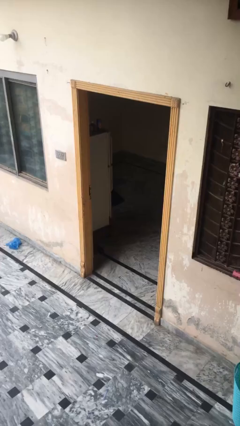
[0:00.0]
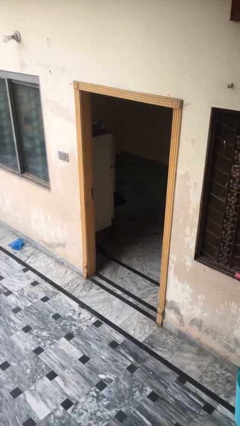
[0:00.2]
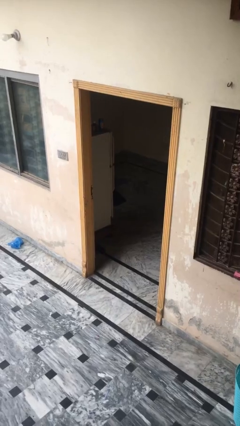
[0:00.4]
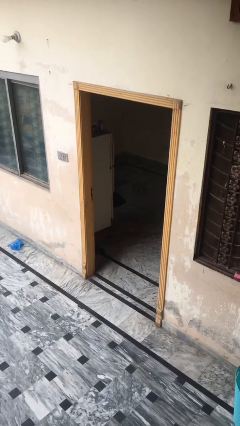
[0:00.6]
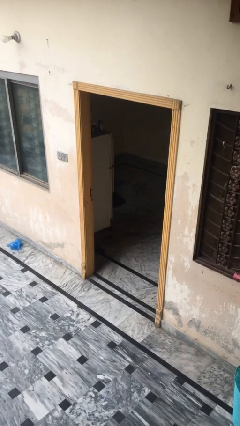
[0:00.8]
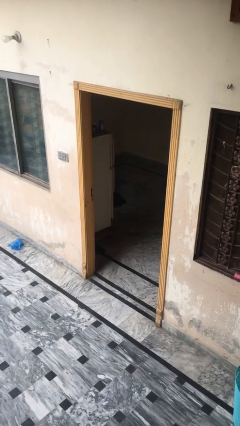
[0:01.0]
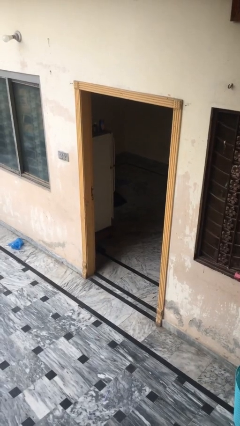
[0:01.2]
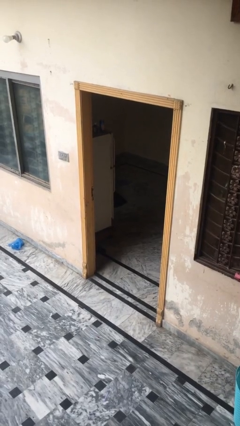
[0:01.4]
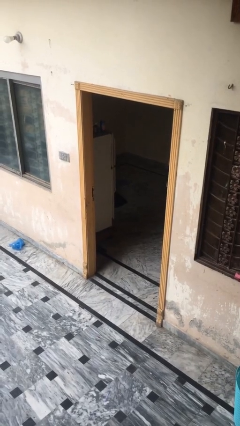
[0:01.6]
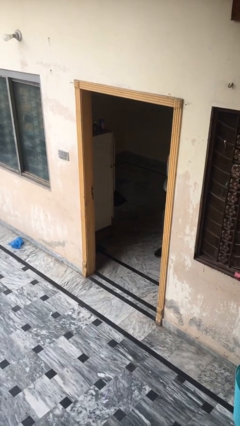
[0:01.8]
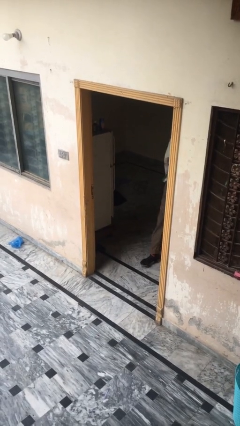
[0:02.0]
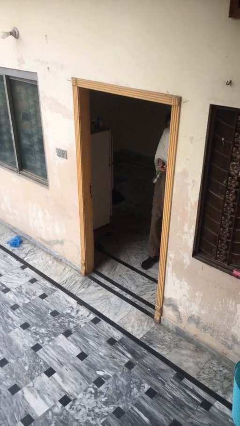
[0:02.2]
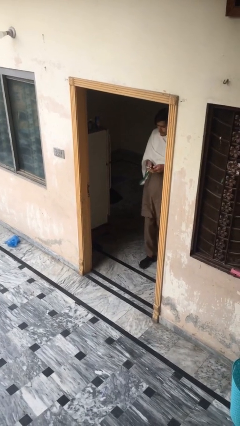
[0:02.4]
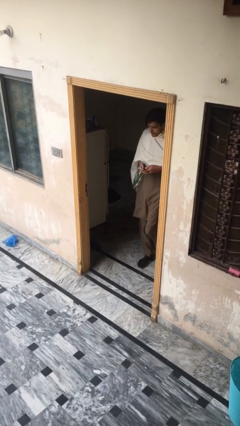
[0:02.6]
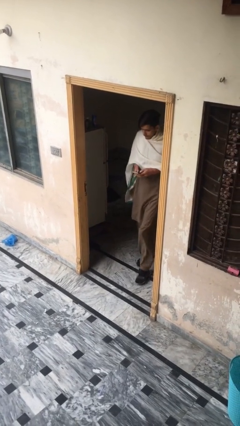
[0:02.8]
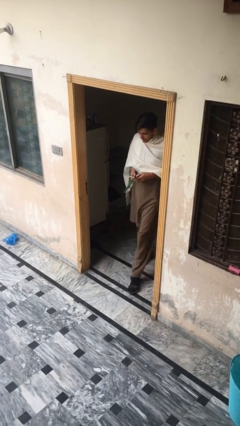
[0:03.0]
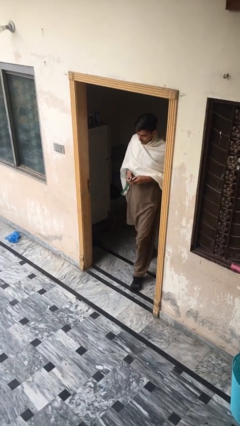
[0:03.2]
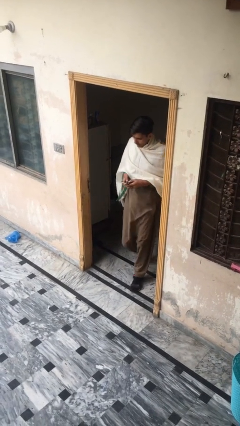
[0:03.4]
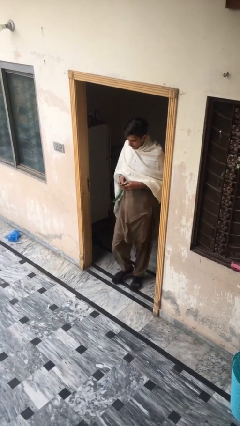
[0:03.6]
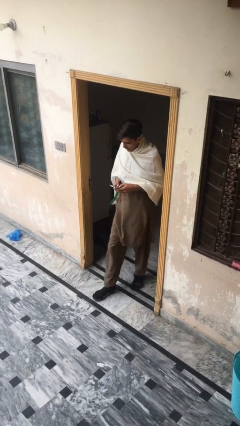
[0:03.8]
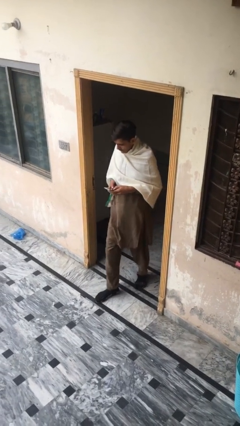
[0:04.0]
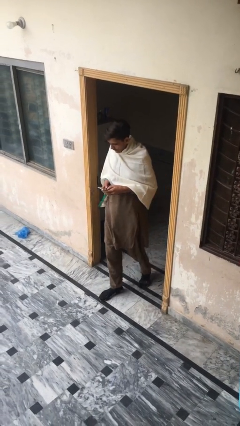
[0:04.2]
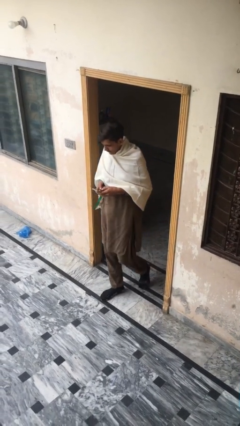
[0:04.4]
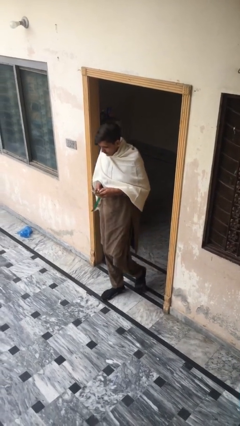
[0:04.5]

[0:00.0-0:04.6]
person enters scene through structure

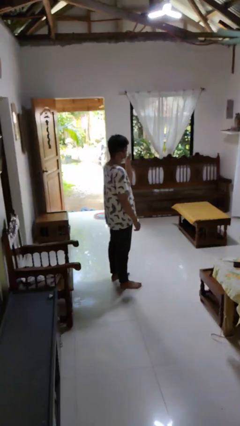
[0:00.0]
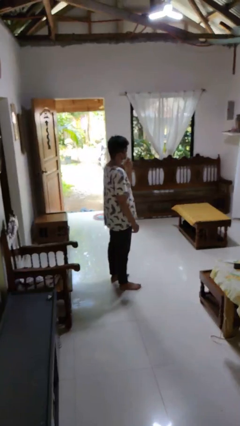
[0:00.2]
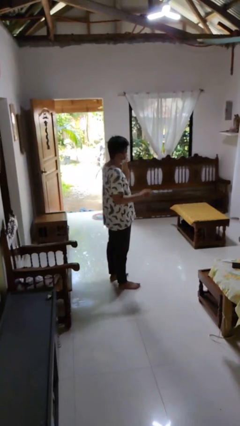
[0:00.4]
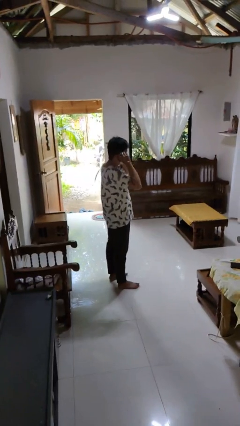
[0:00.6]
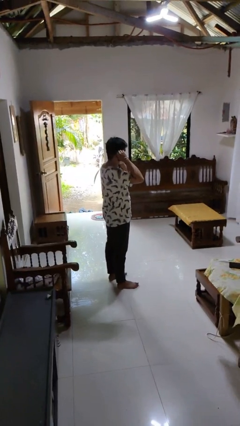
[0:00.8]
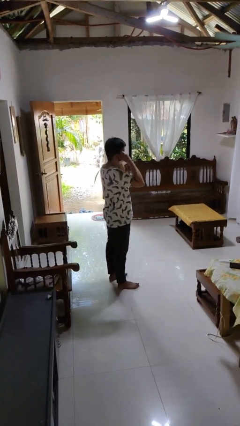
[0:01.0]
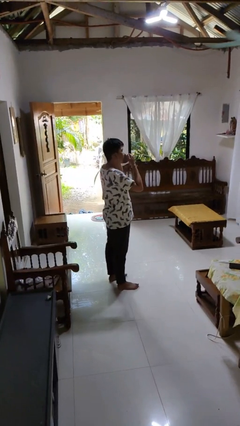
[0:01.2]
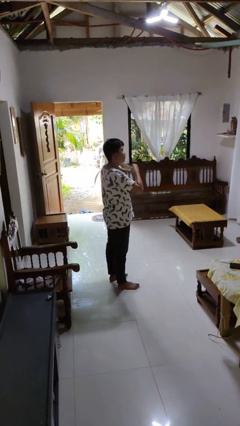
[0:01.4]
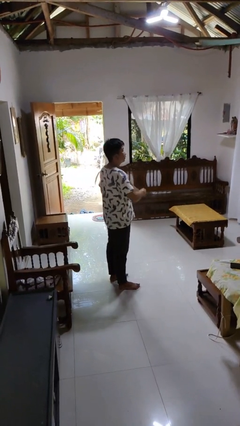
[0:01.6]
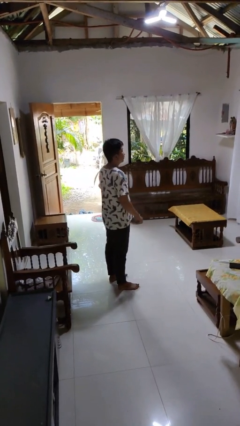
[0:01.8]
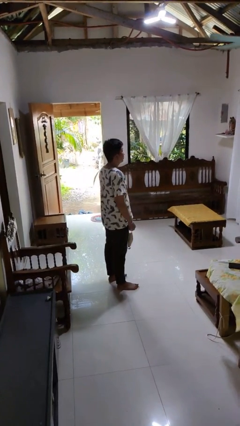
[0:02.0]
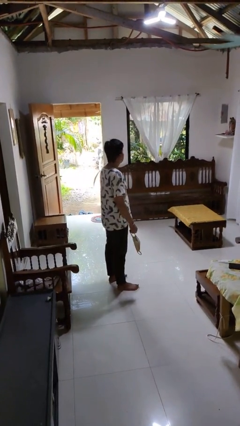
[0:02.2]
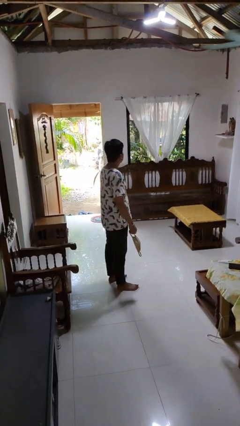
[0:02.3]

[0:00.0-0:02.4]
person takes off facemask

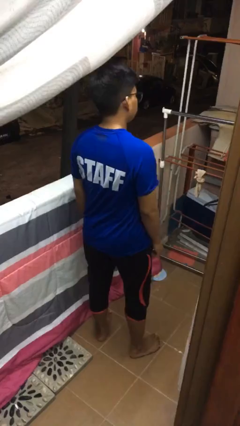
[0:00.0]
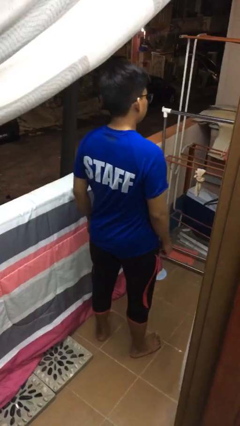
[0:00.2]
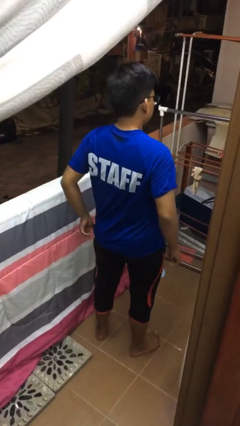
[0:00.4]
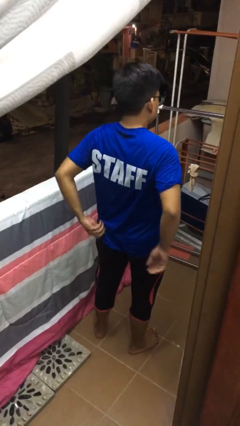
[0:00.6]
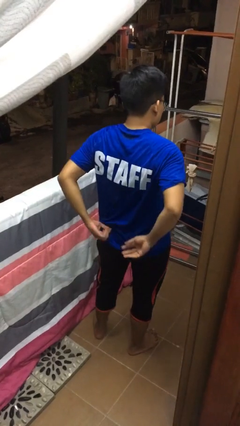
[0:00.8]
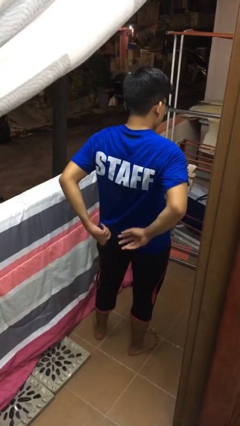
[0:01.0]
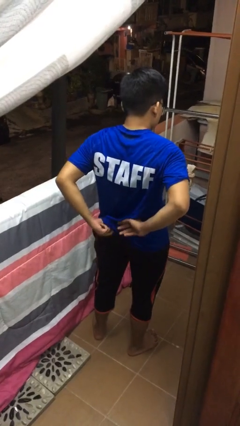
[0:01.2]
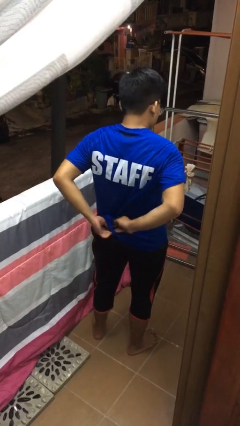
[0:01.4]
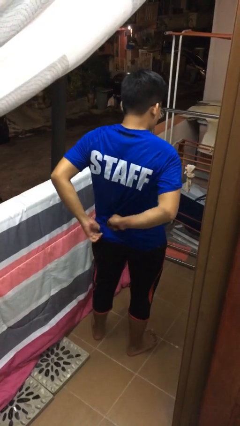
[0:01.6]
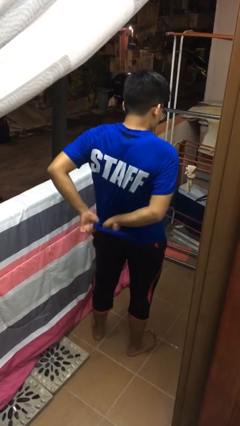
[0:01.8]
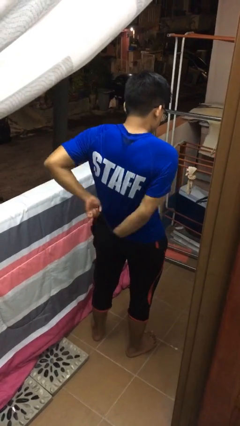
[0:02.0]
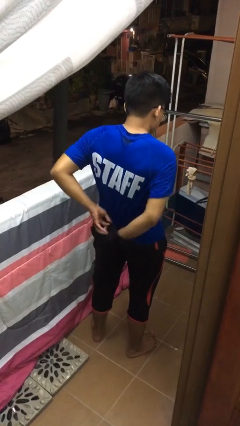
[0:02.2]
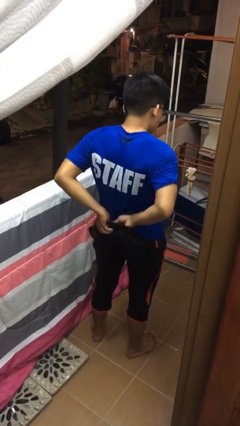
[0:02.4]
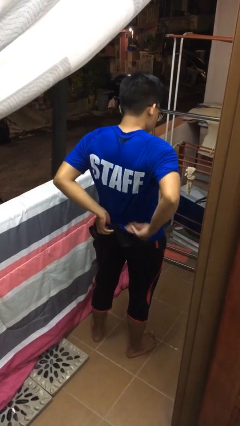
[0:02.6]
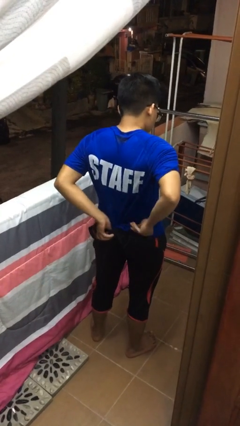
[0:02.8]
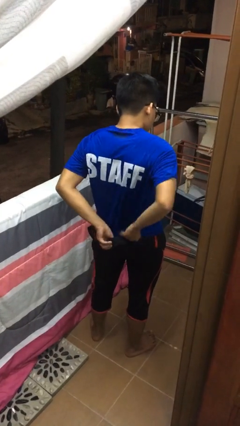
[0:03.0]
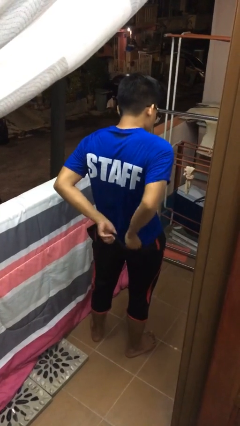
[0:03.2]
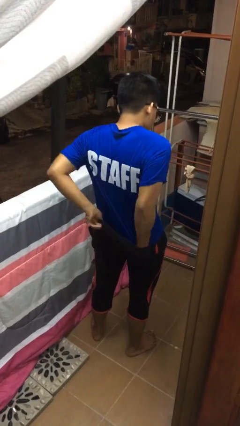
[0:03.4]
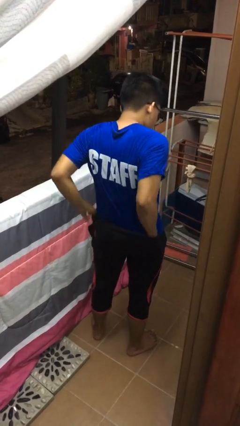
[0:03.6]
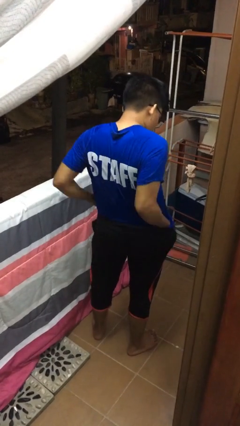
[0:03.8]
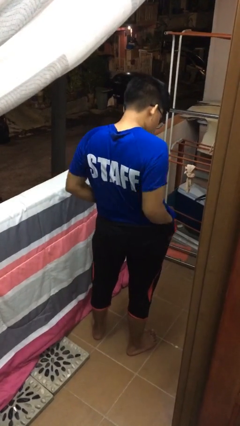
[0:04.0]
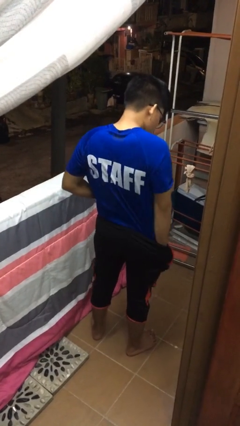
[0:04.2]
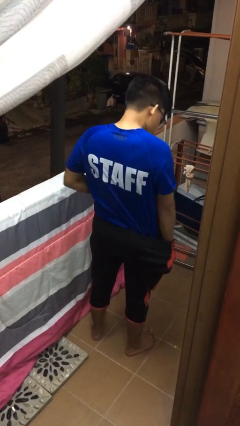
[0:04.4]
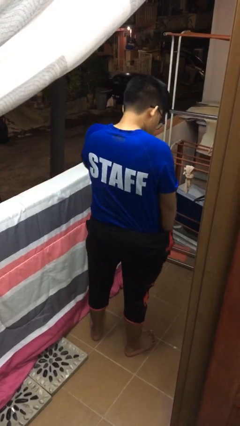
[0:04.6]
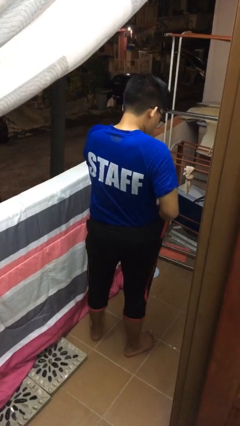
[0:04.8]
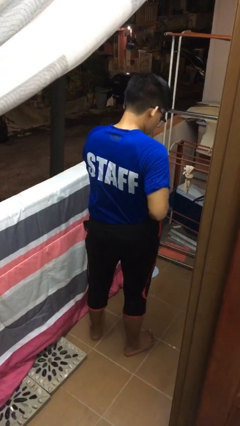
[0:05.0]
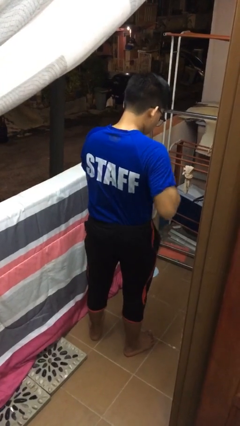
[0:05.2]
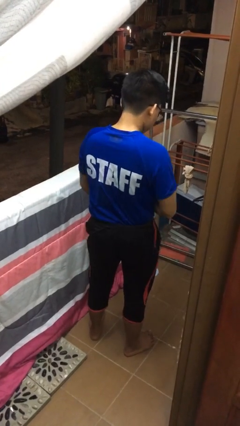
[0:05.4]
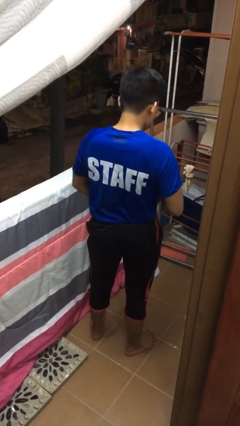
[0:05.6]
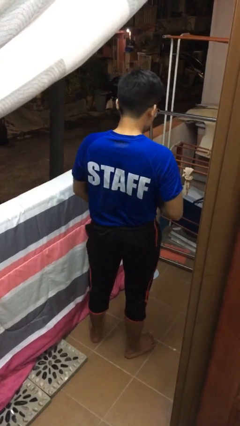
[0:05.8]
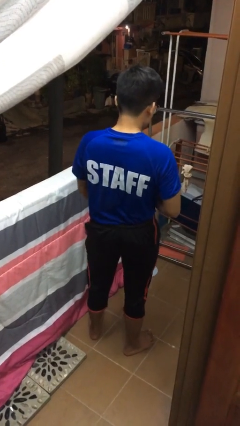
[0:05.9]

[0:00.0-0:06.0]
person tucks in shirt

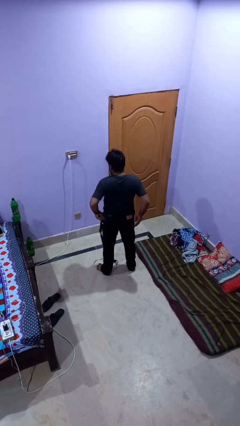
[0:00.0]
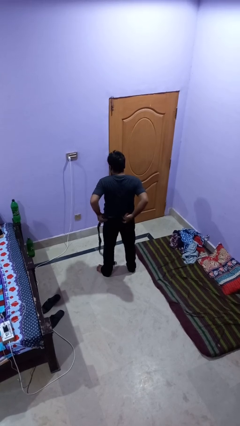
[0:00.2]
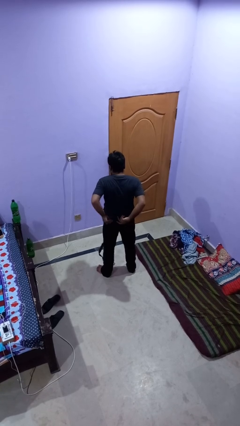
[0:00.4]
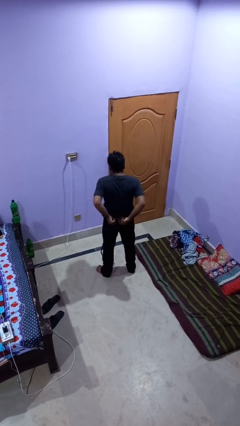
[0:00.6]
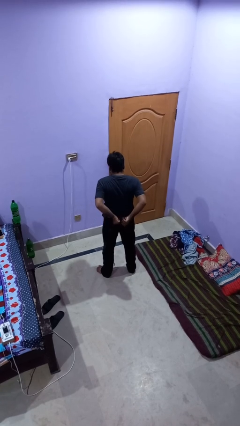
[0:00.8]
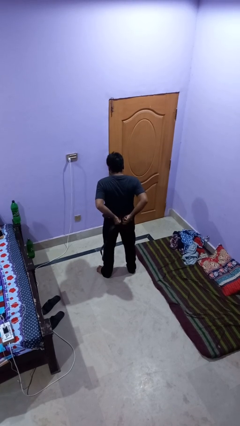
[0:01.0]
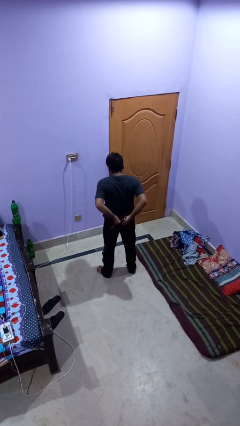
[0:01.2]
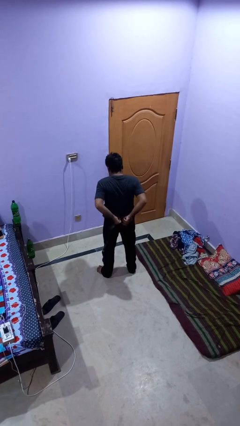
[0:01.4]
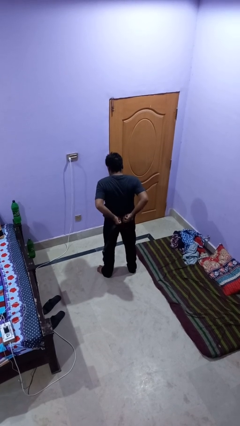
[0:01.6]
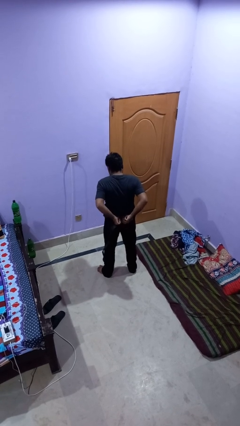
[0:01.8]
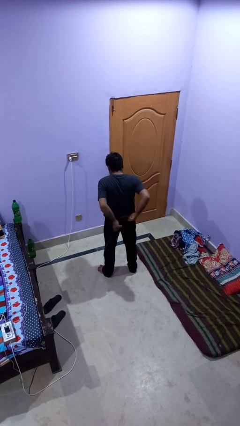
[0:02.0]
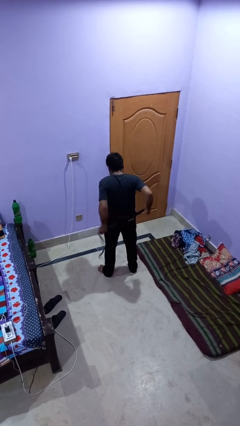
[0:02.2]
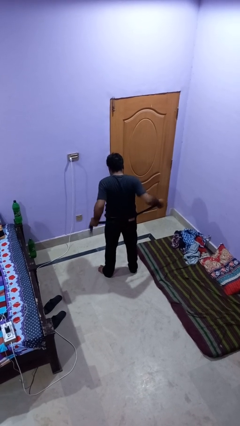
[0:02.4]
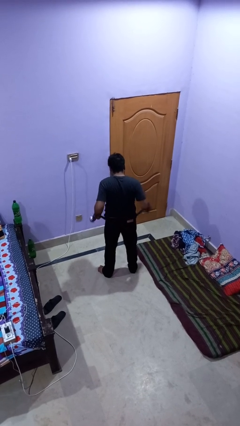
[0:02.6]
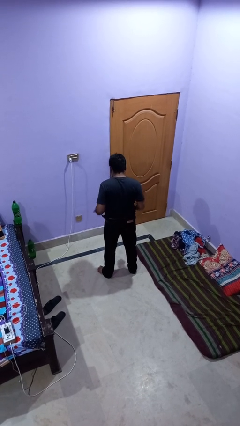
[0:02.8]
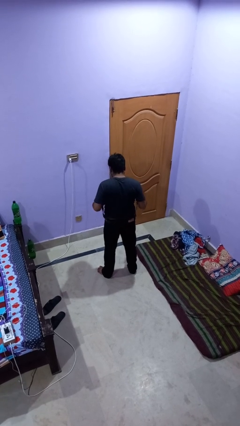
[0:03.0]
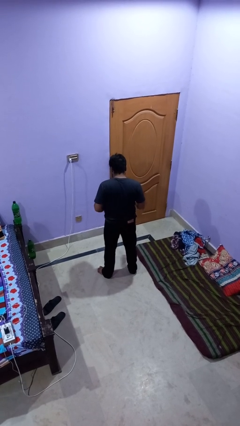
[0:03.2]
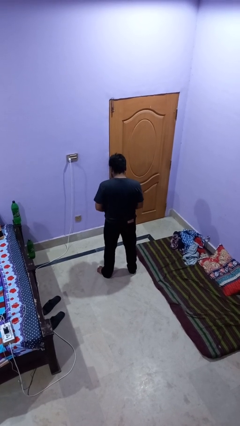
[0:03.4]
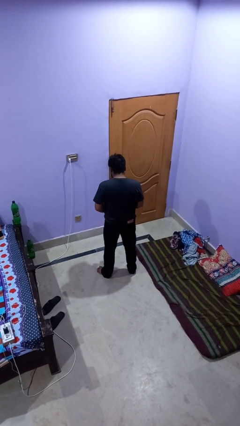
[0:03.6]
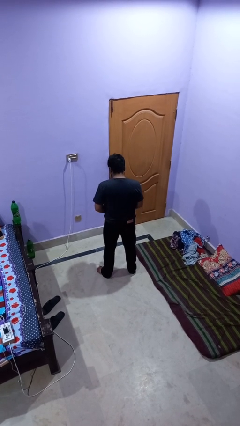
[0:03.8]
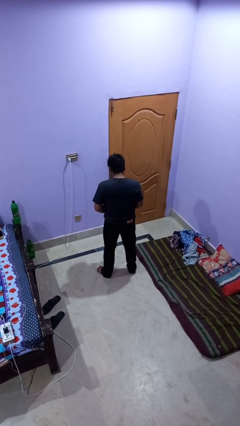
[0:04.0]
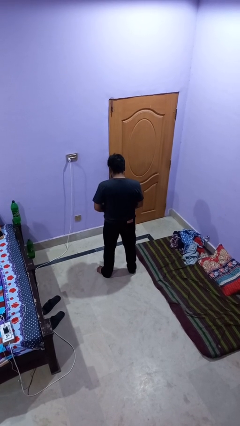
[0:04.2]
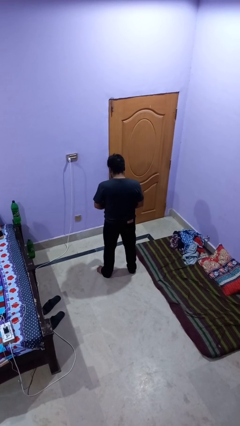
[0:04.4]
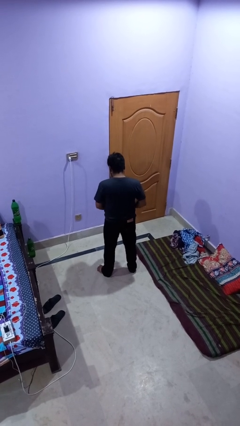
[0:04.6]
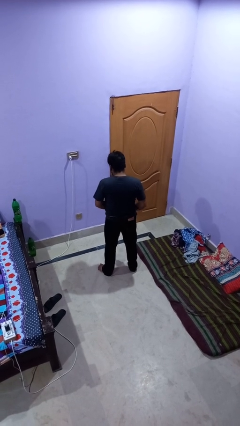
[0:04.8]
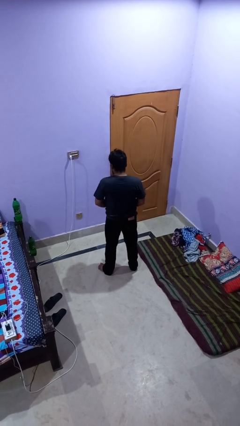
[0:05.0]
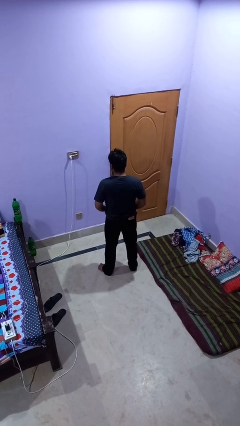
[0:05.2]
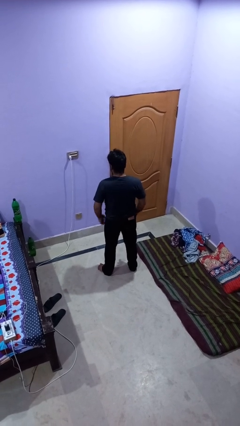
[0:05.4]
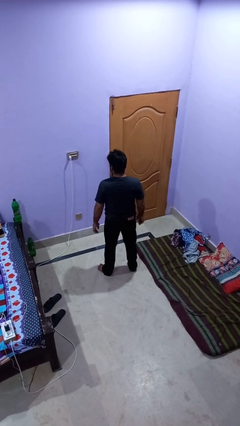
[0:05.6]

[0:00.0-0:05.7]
person puts on belt
